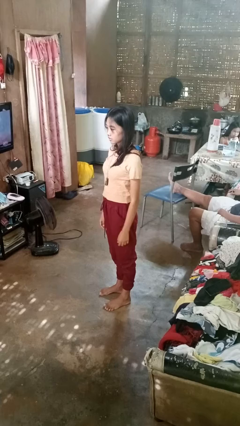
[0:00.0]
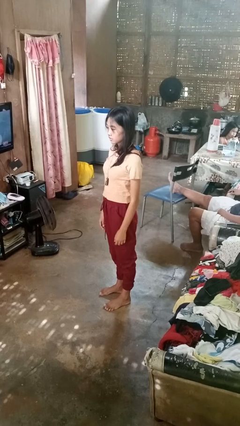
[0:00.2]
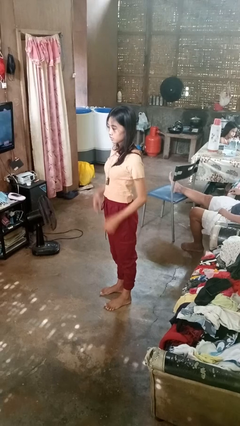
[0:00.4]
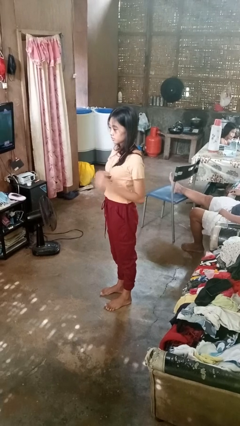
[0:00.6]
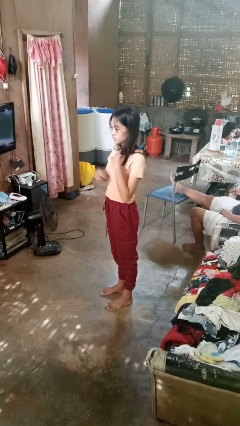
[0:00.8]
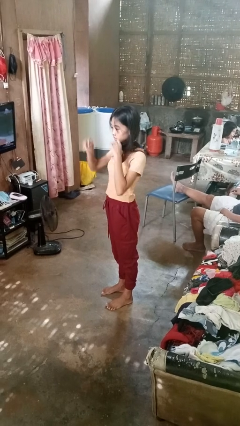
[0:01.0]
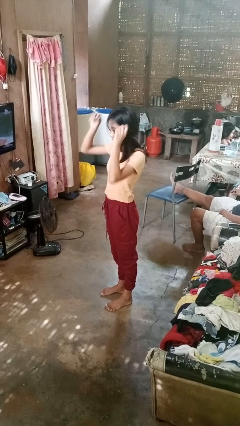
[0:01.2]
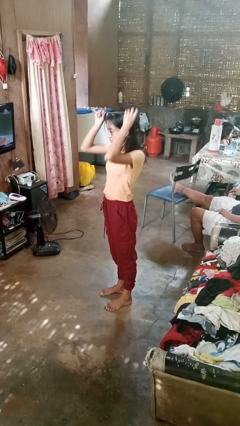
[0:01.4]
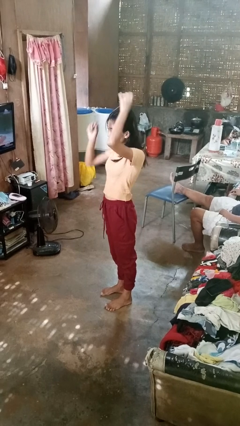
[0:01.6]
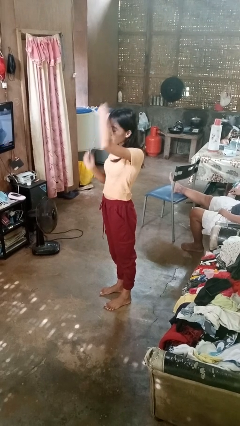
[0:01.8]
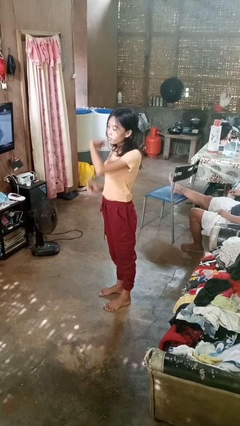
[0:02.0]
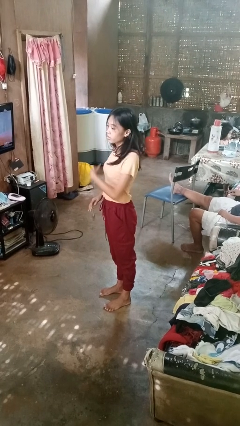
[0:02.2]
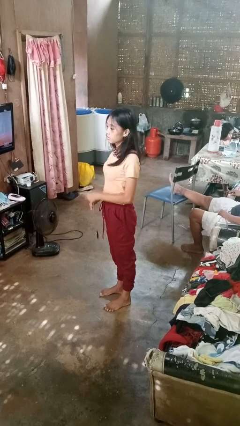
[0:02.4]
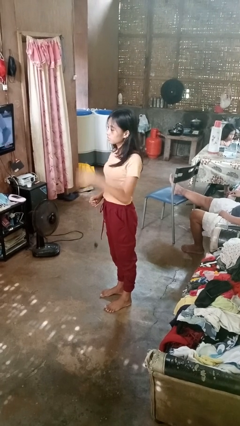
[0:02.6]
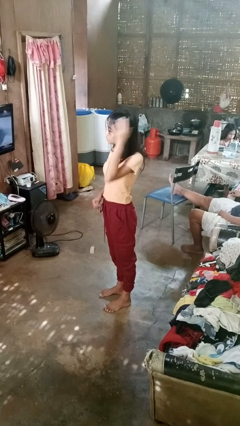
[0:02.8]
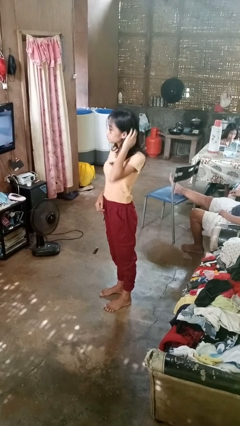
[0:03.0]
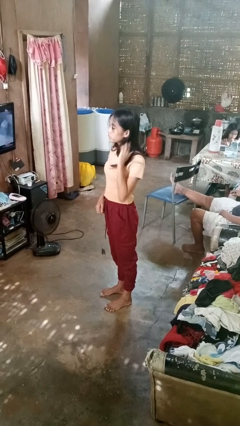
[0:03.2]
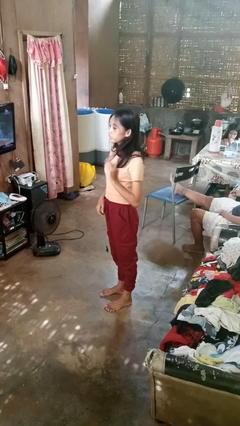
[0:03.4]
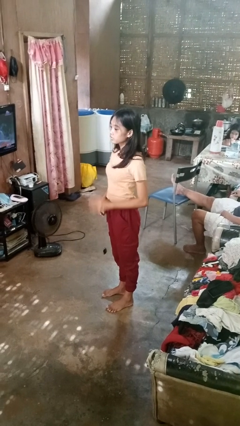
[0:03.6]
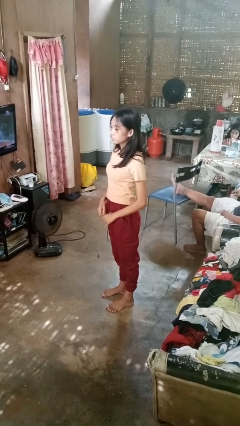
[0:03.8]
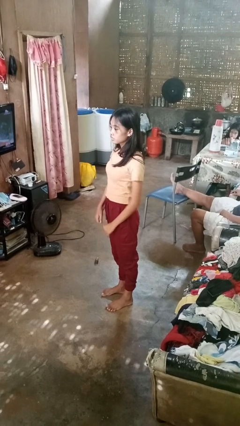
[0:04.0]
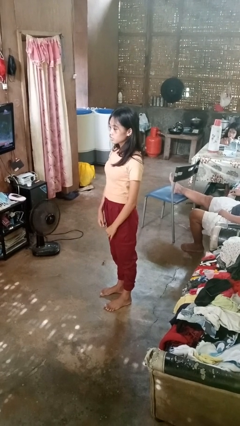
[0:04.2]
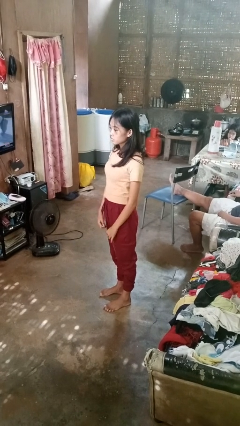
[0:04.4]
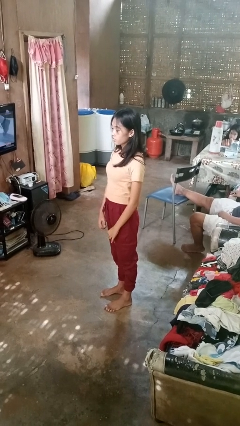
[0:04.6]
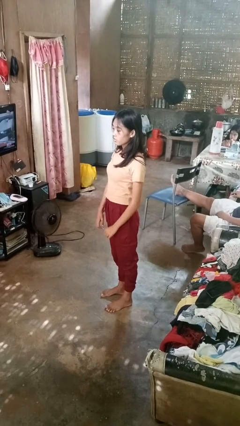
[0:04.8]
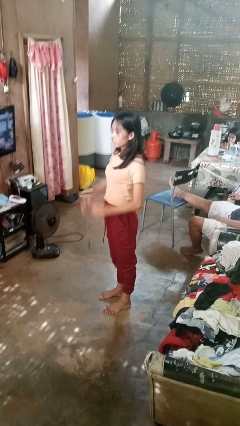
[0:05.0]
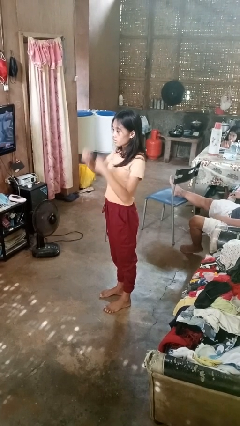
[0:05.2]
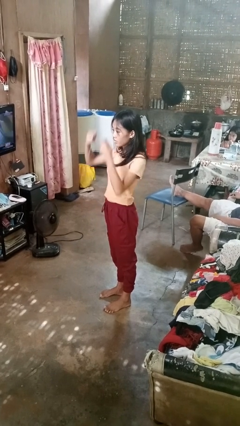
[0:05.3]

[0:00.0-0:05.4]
person puts on belt

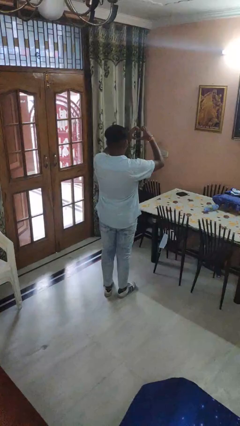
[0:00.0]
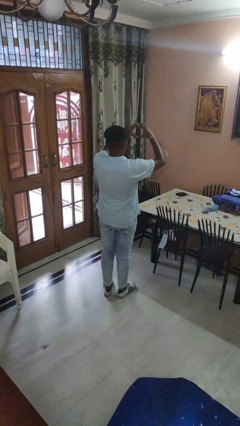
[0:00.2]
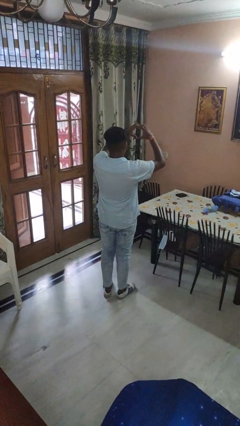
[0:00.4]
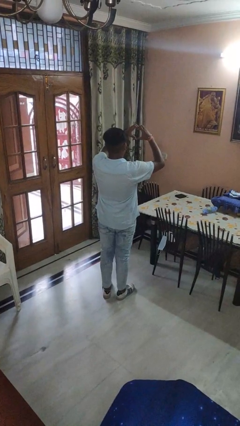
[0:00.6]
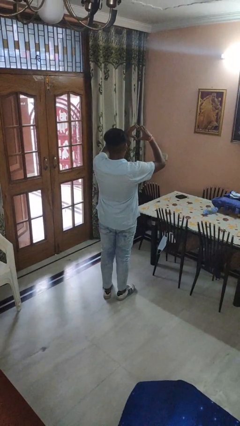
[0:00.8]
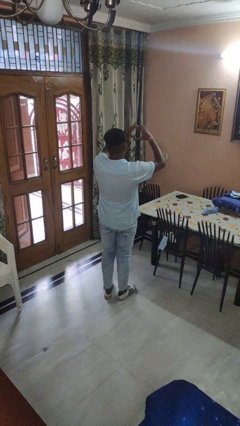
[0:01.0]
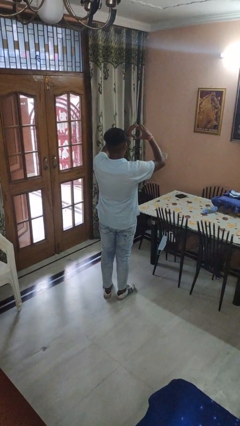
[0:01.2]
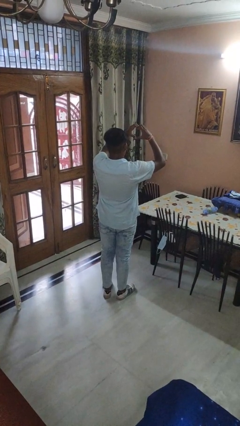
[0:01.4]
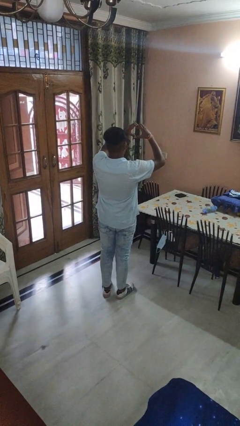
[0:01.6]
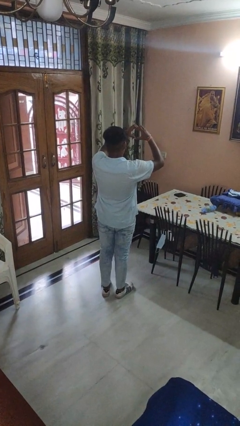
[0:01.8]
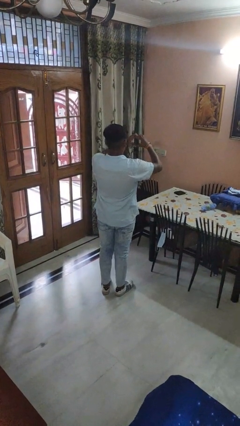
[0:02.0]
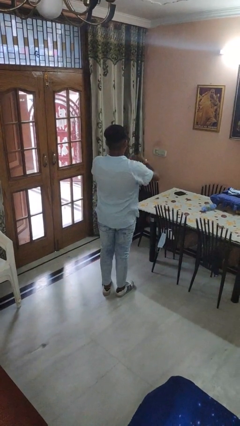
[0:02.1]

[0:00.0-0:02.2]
person gestures heart

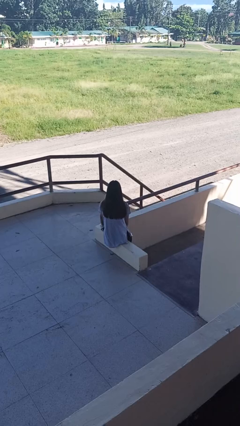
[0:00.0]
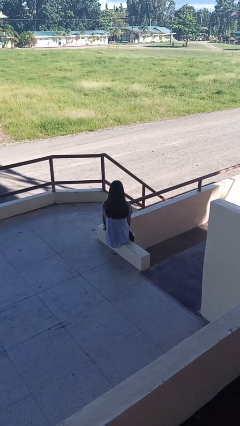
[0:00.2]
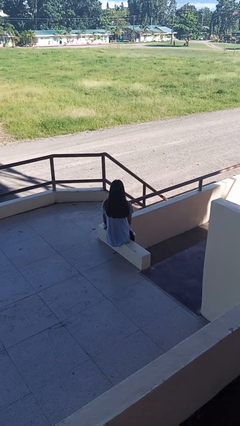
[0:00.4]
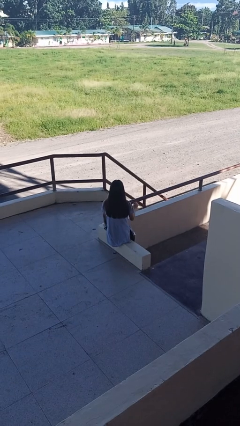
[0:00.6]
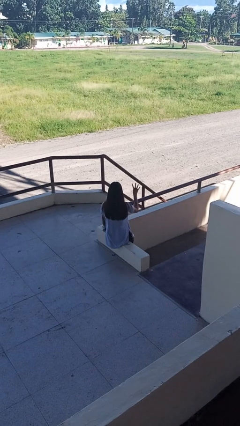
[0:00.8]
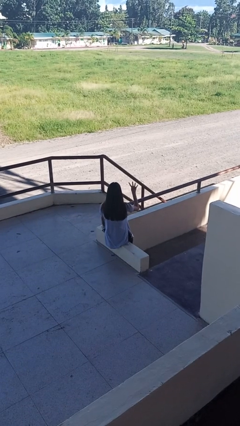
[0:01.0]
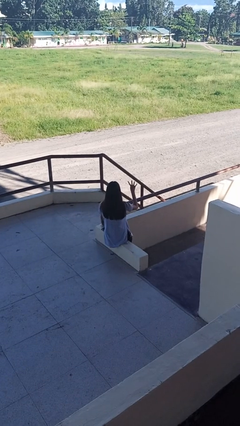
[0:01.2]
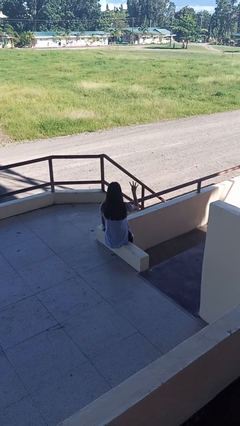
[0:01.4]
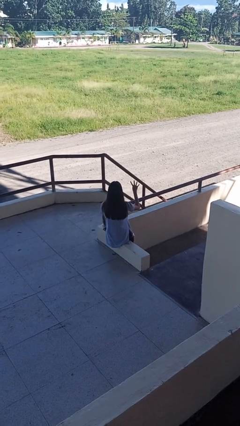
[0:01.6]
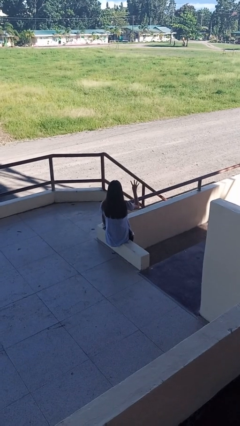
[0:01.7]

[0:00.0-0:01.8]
person gestures number four

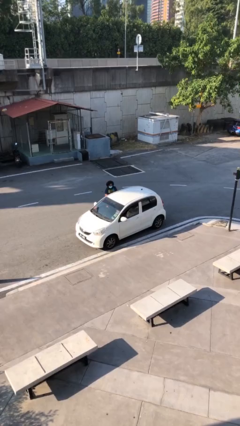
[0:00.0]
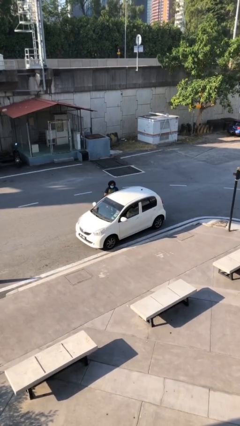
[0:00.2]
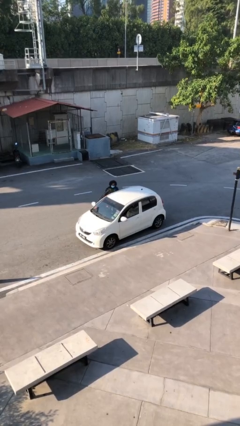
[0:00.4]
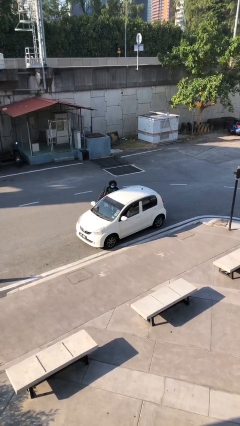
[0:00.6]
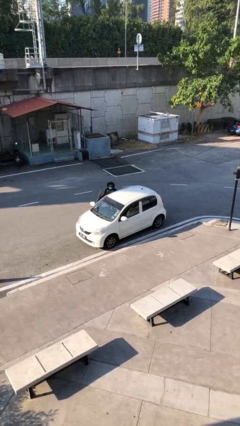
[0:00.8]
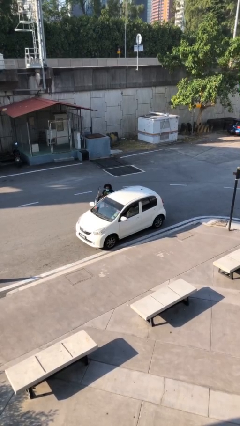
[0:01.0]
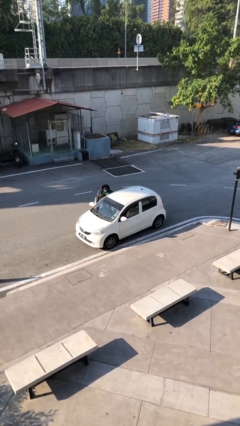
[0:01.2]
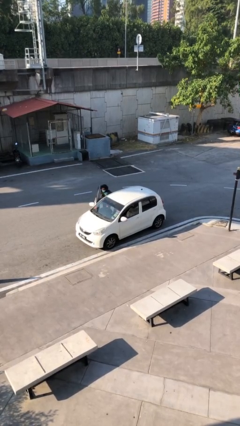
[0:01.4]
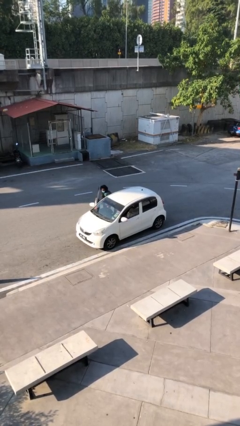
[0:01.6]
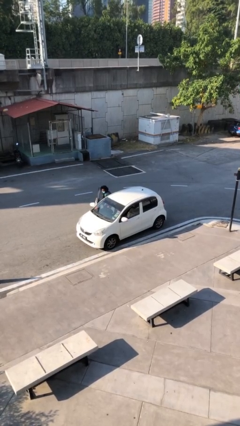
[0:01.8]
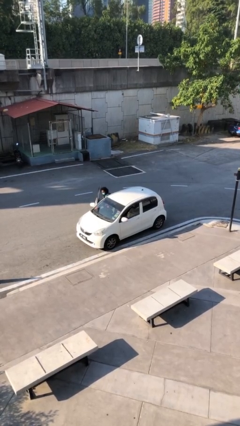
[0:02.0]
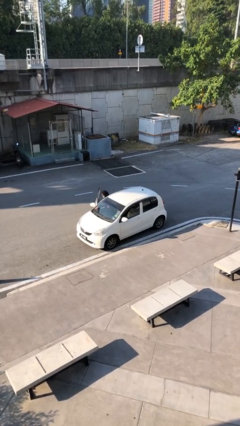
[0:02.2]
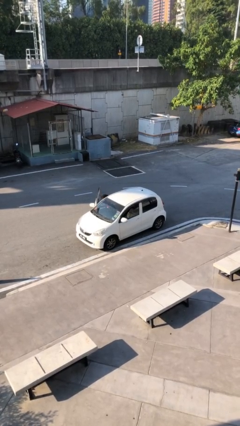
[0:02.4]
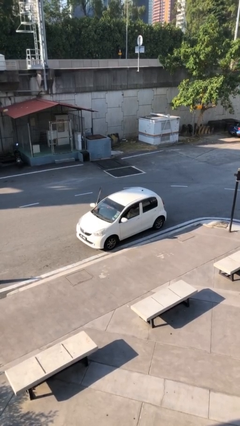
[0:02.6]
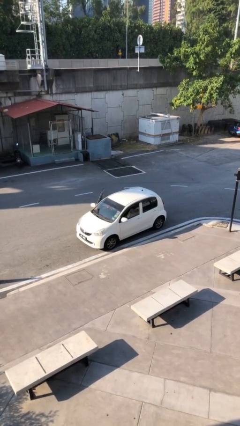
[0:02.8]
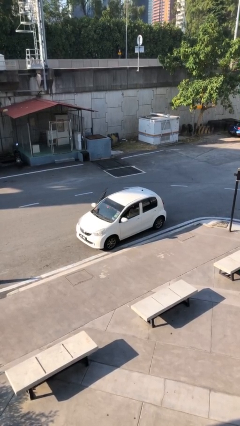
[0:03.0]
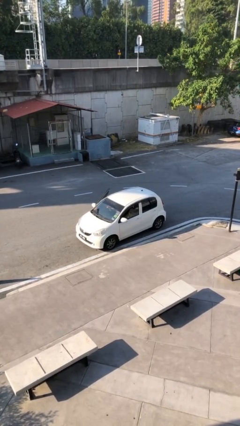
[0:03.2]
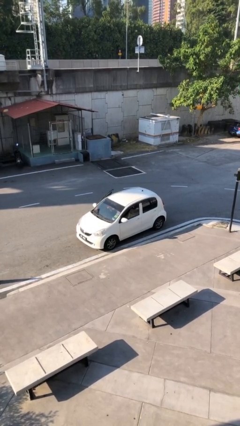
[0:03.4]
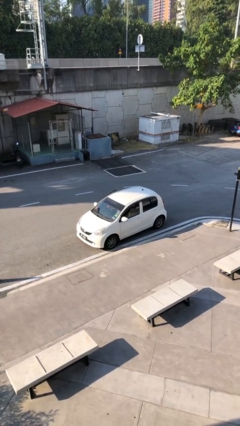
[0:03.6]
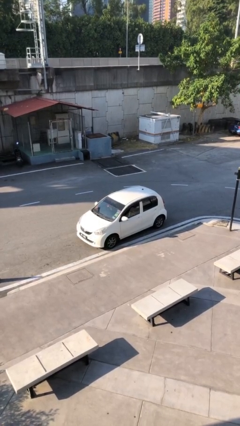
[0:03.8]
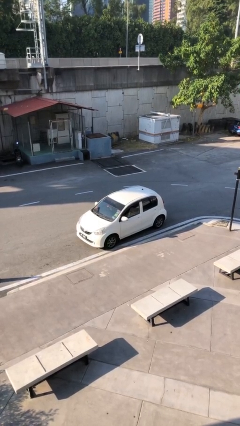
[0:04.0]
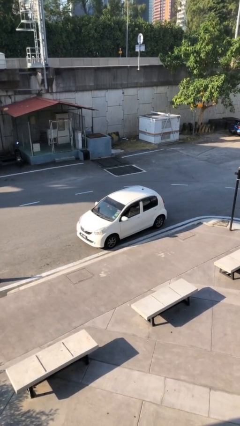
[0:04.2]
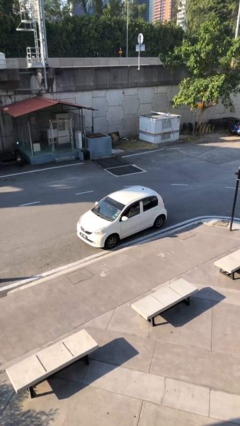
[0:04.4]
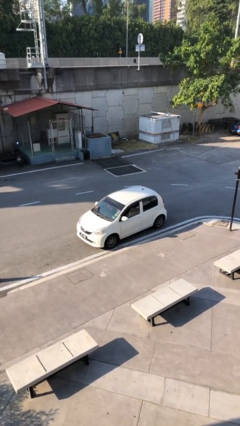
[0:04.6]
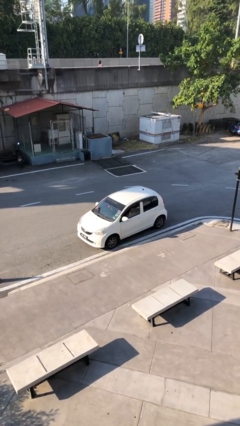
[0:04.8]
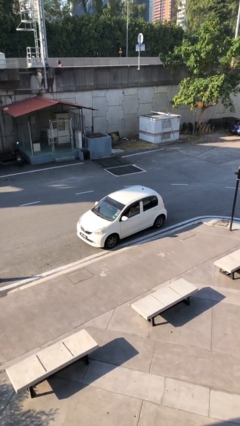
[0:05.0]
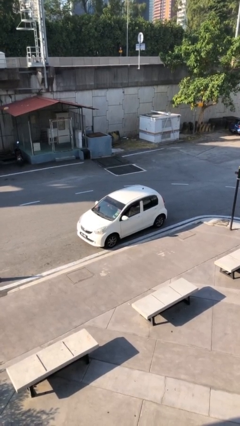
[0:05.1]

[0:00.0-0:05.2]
car picks up person

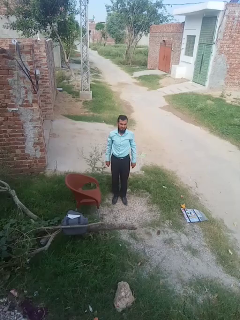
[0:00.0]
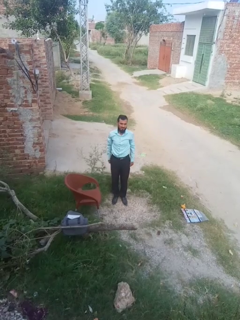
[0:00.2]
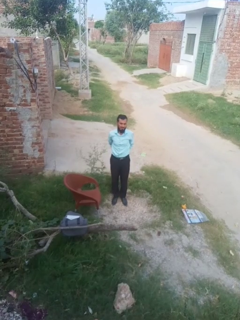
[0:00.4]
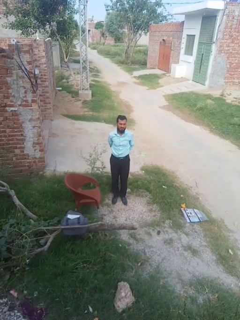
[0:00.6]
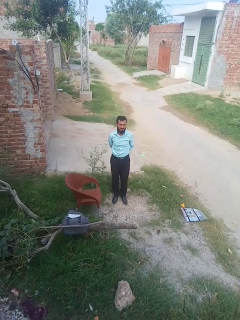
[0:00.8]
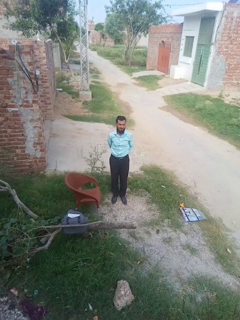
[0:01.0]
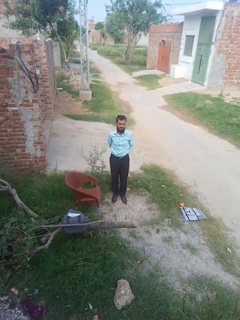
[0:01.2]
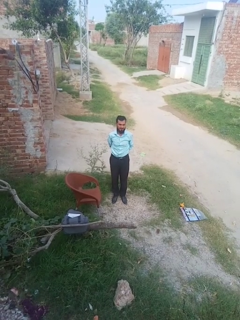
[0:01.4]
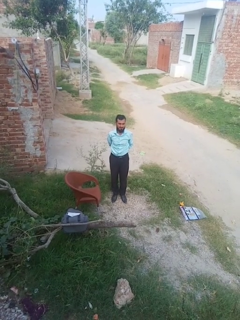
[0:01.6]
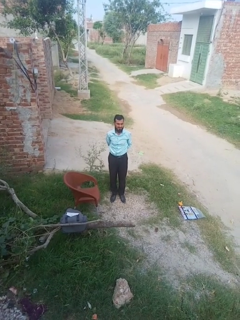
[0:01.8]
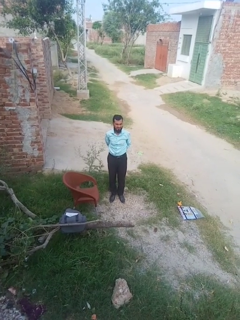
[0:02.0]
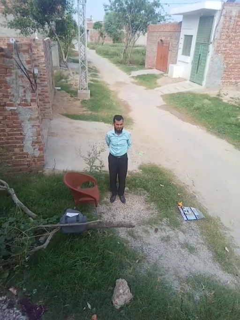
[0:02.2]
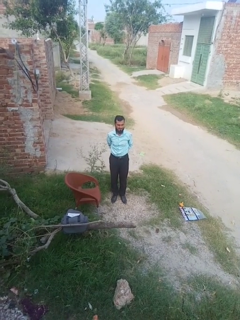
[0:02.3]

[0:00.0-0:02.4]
person stretches back

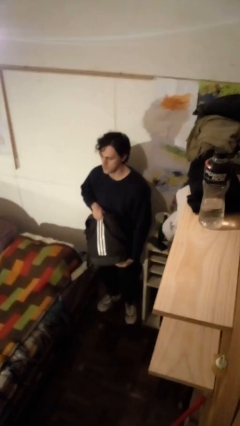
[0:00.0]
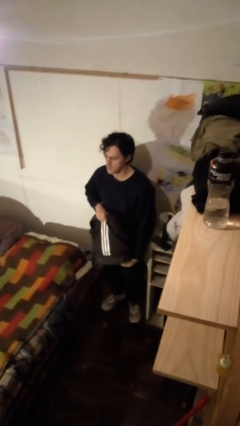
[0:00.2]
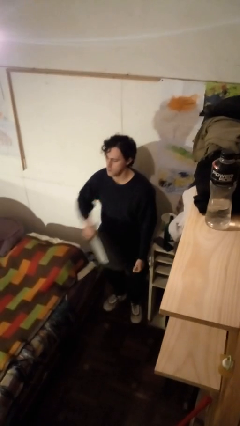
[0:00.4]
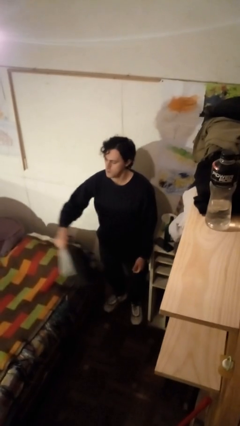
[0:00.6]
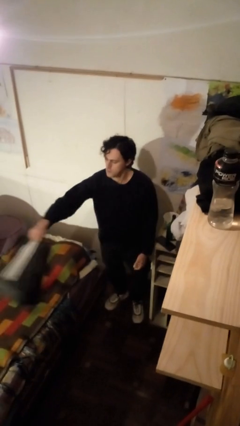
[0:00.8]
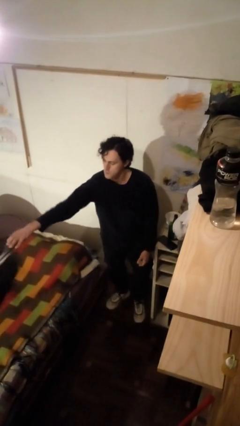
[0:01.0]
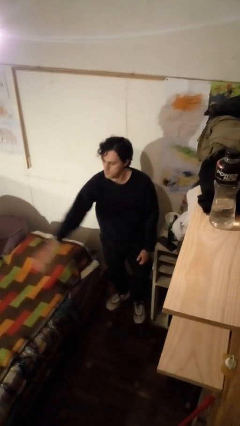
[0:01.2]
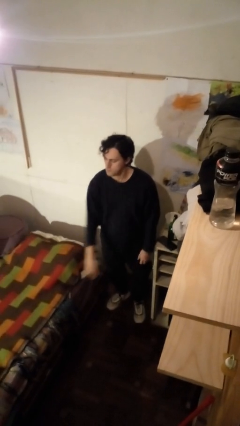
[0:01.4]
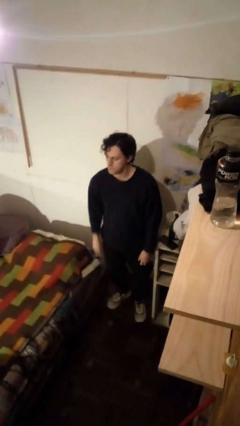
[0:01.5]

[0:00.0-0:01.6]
person throws object on bed
